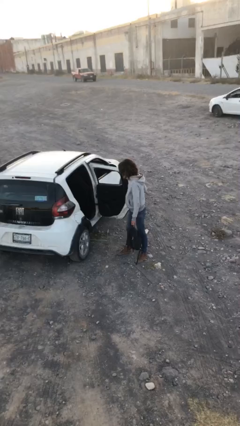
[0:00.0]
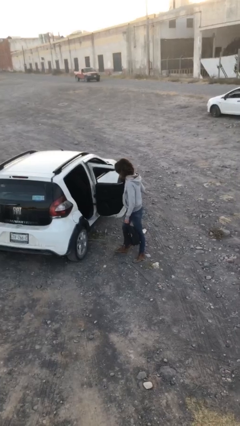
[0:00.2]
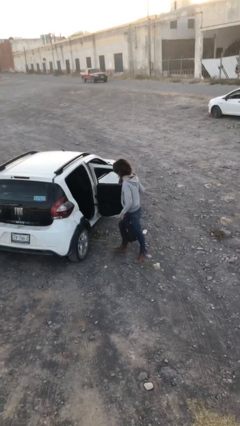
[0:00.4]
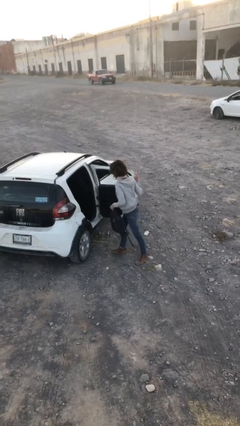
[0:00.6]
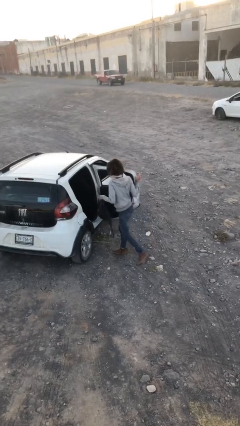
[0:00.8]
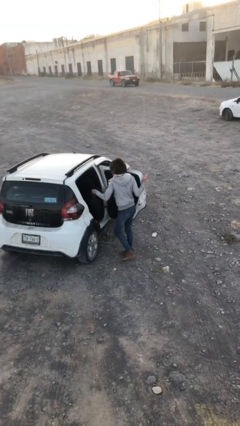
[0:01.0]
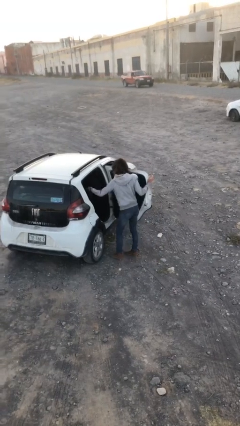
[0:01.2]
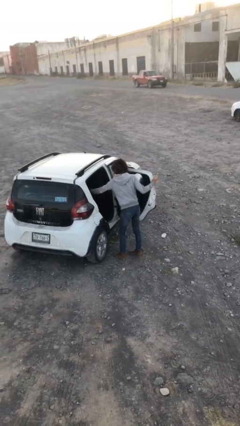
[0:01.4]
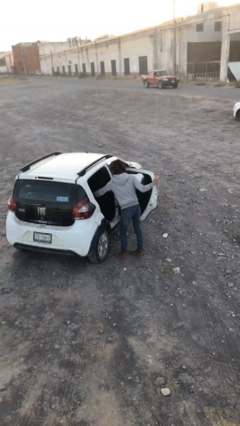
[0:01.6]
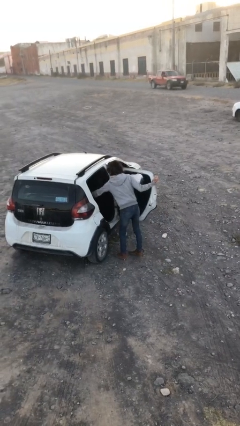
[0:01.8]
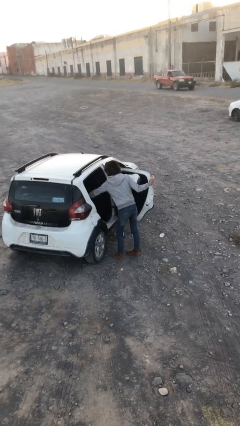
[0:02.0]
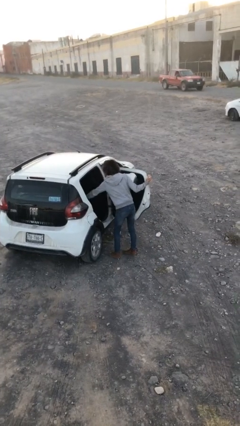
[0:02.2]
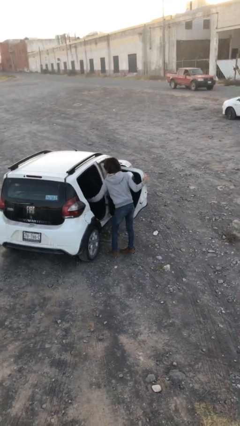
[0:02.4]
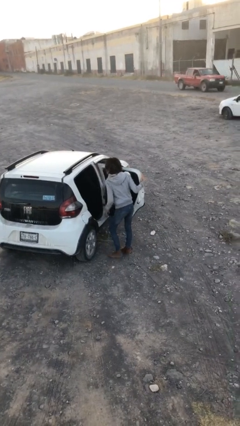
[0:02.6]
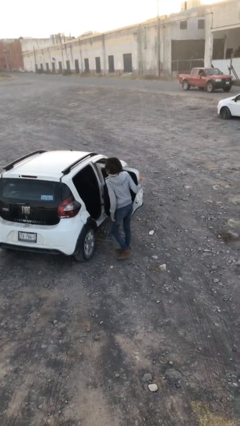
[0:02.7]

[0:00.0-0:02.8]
person loads car

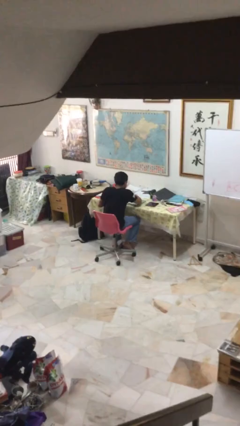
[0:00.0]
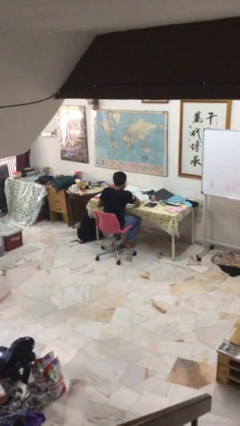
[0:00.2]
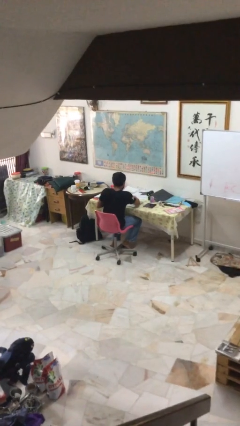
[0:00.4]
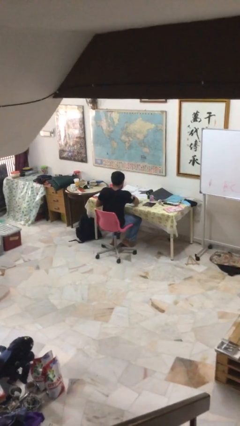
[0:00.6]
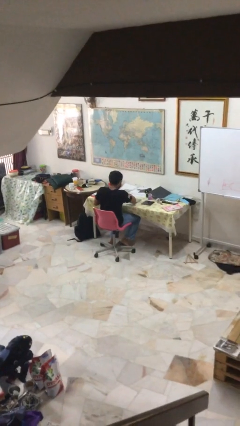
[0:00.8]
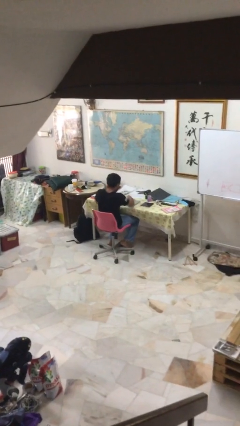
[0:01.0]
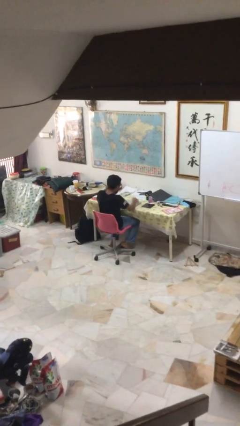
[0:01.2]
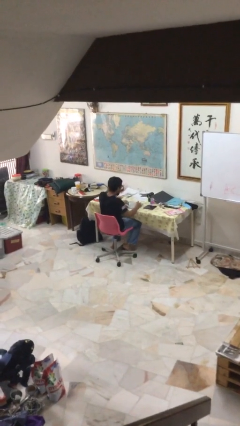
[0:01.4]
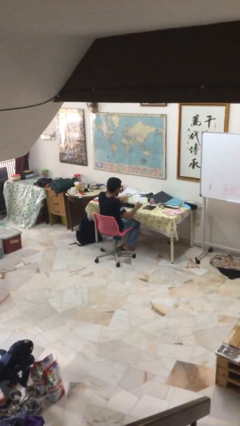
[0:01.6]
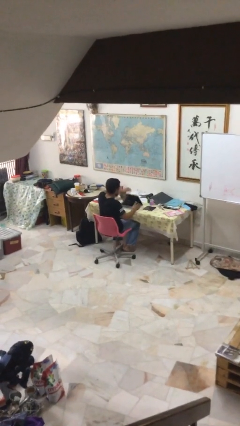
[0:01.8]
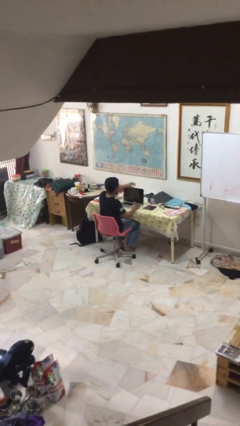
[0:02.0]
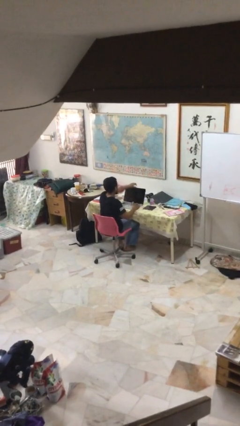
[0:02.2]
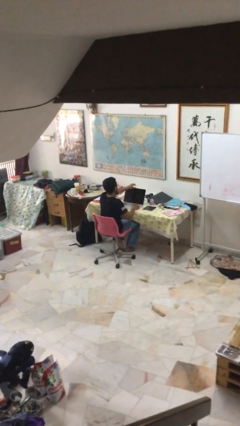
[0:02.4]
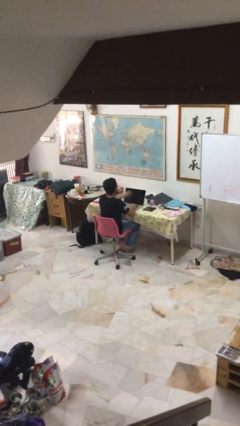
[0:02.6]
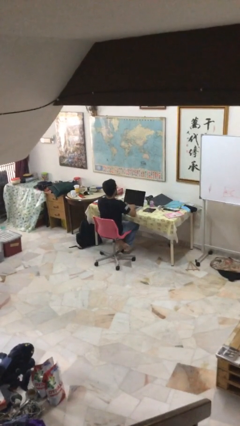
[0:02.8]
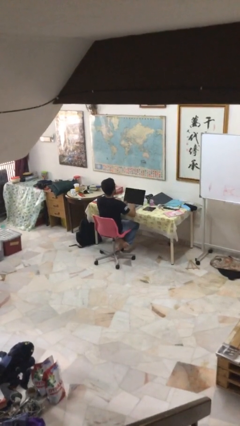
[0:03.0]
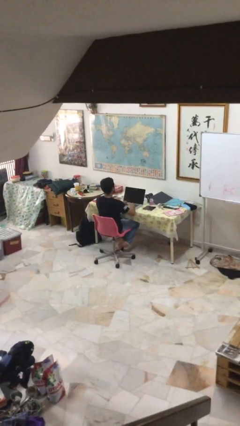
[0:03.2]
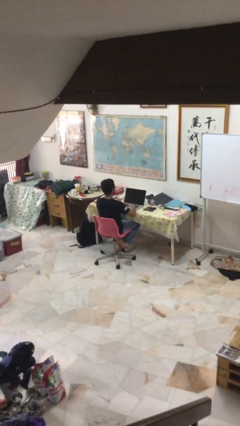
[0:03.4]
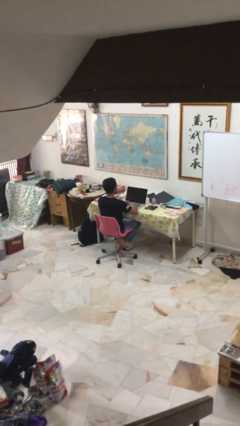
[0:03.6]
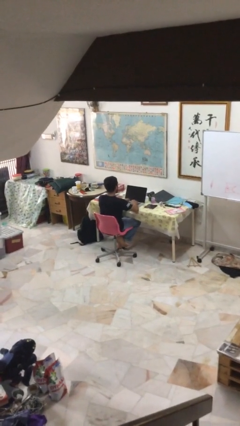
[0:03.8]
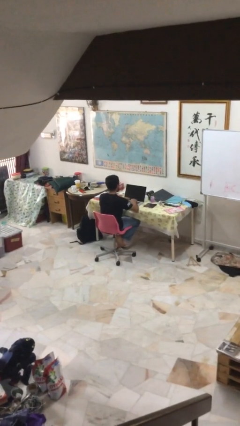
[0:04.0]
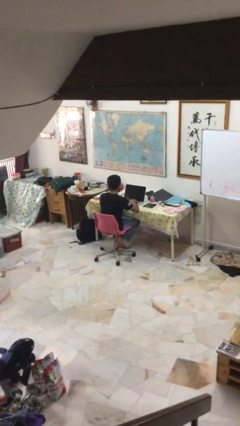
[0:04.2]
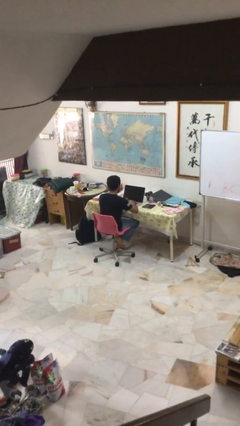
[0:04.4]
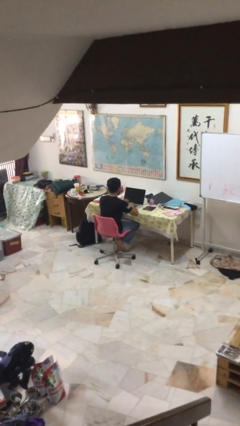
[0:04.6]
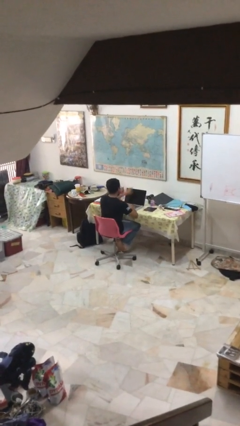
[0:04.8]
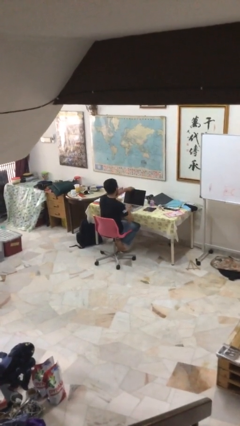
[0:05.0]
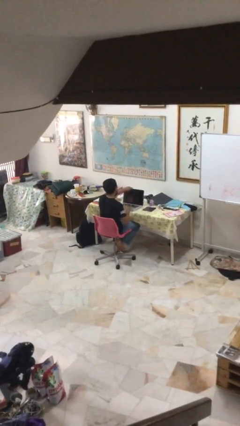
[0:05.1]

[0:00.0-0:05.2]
person interacts with laptop

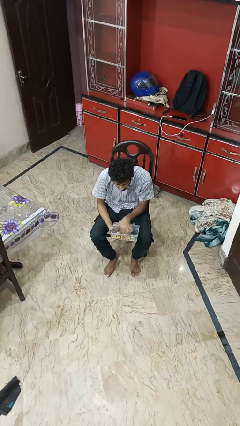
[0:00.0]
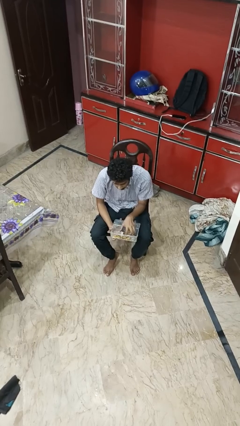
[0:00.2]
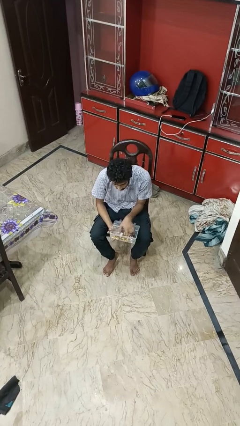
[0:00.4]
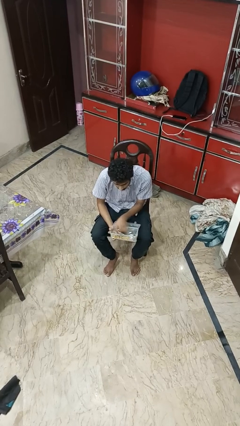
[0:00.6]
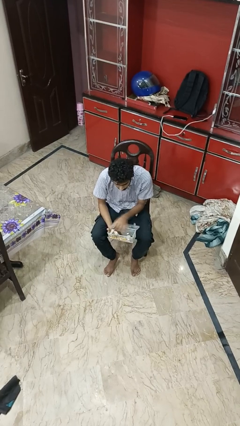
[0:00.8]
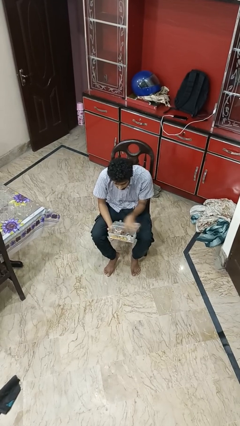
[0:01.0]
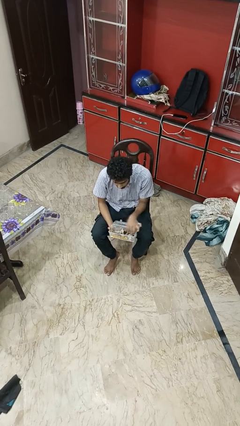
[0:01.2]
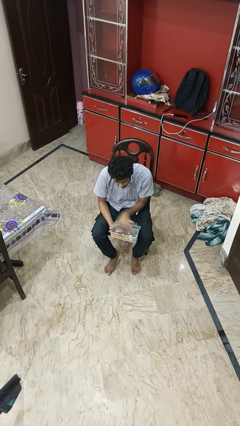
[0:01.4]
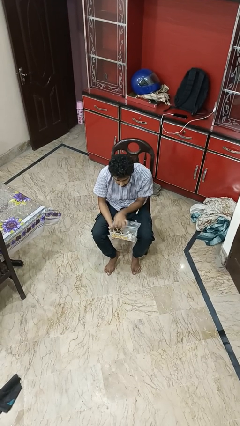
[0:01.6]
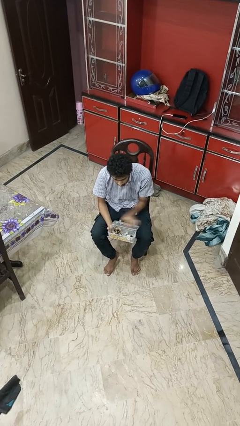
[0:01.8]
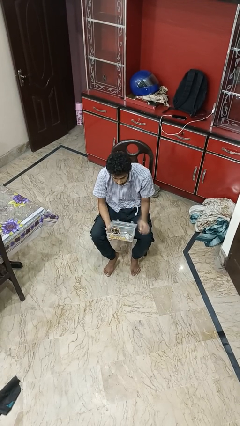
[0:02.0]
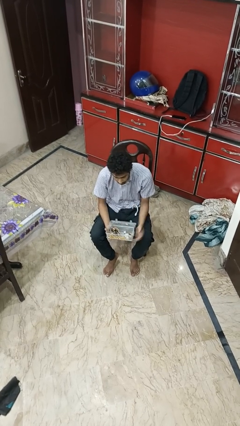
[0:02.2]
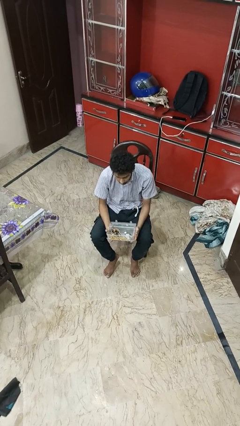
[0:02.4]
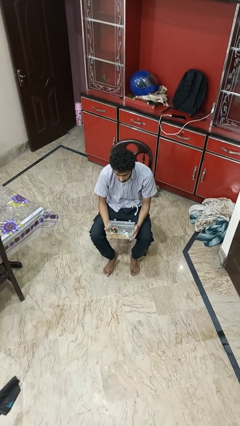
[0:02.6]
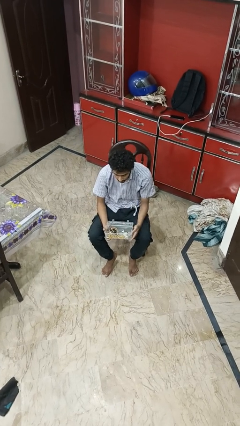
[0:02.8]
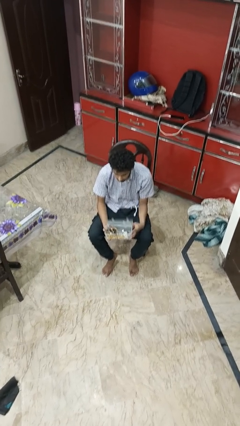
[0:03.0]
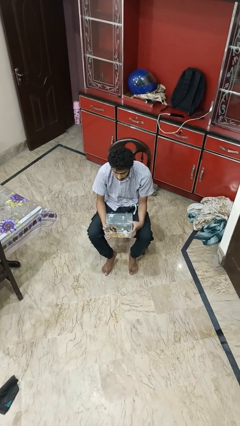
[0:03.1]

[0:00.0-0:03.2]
person searches jewelry box

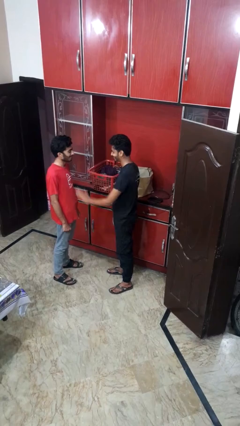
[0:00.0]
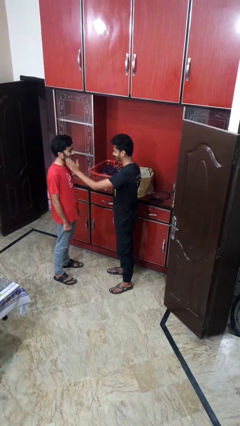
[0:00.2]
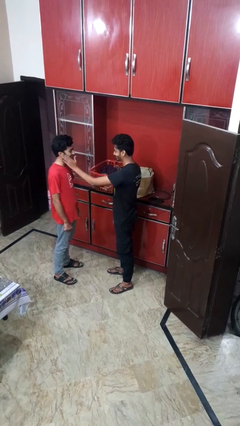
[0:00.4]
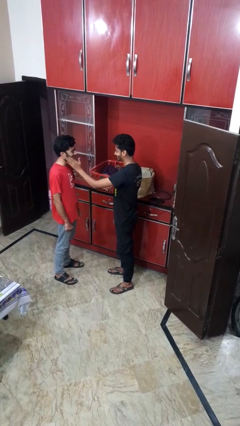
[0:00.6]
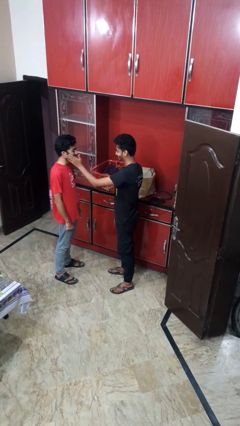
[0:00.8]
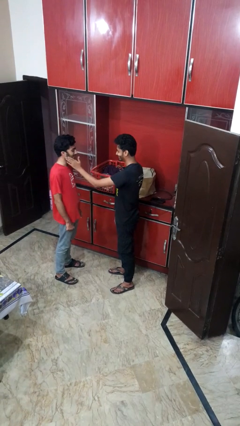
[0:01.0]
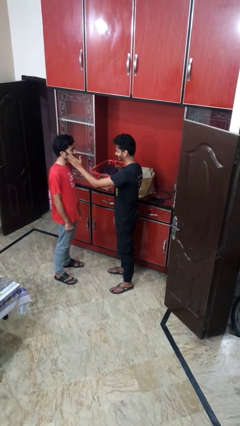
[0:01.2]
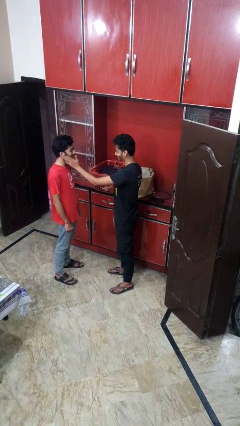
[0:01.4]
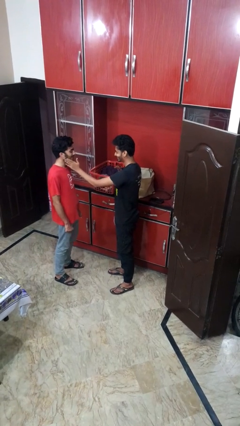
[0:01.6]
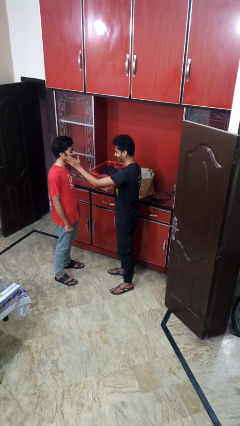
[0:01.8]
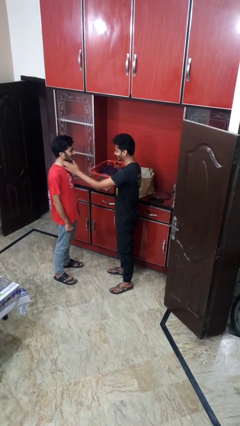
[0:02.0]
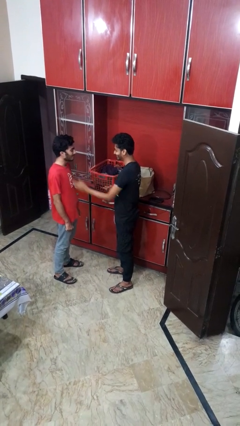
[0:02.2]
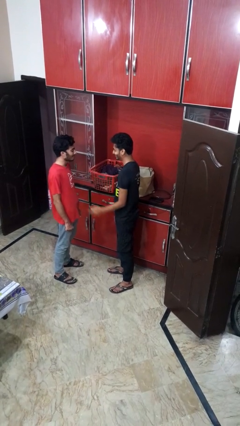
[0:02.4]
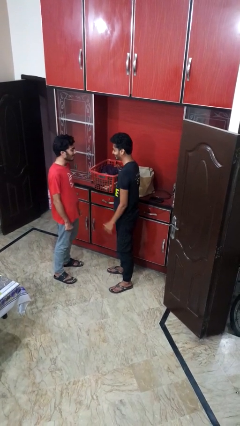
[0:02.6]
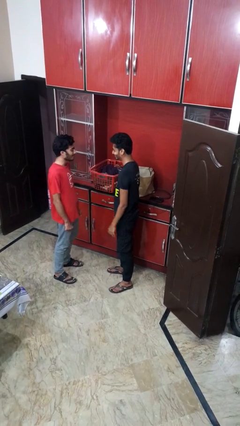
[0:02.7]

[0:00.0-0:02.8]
person touches face of person

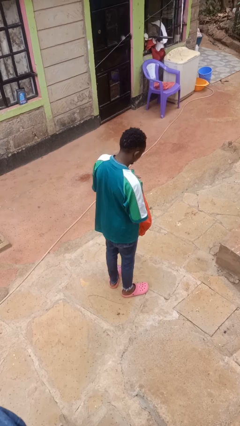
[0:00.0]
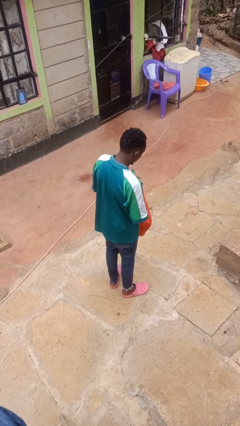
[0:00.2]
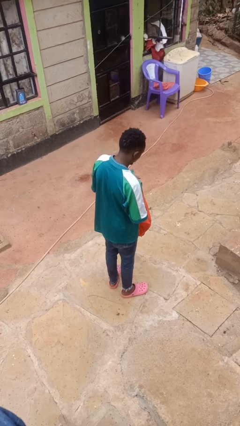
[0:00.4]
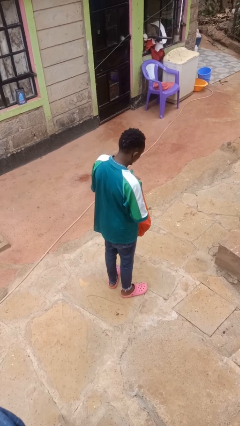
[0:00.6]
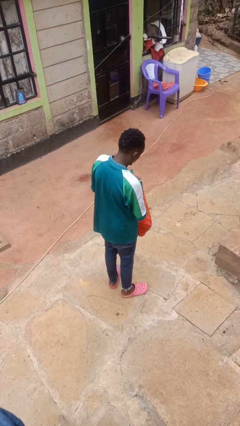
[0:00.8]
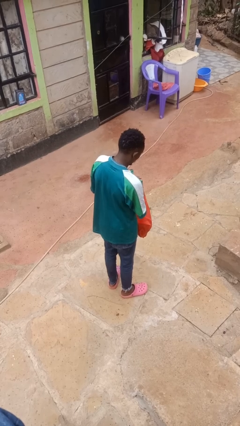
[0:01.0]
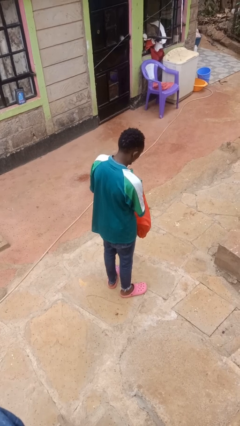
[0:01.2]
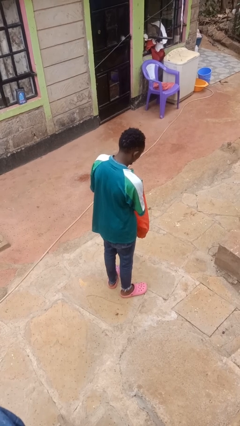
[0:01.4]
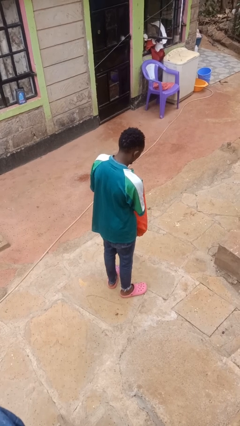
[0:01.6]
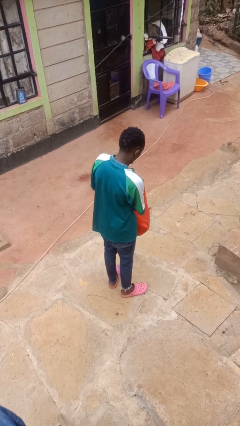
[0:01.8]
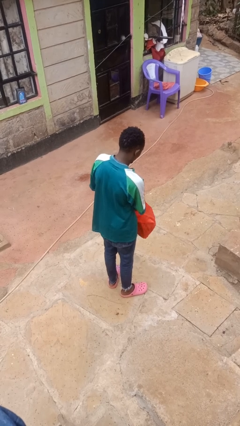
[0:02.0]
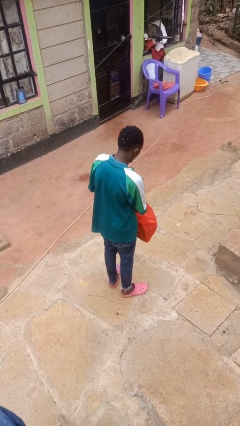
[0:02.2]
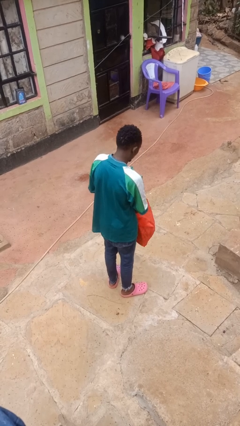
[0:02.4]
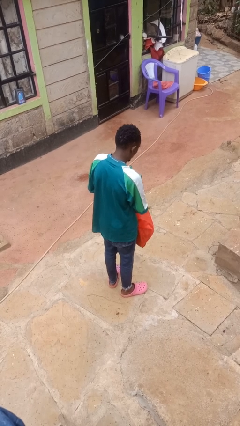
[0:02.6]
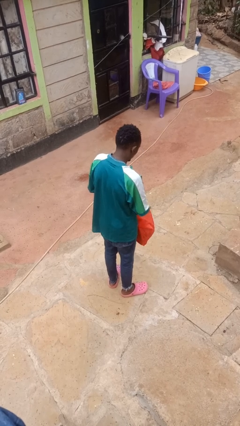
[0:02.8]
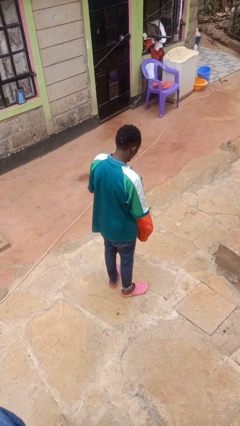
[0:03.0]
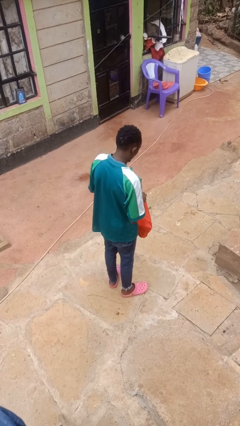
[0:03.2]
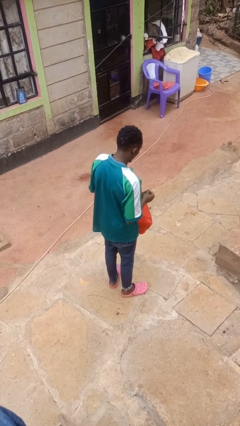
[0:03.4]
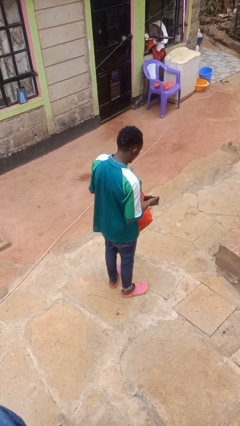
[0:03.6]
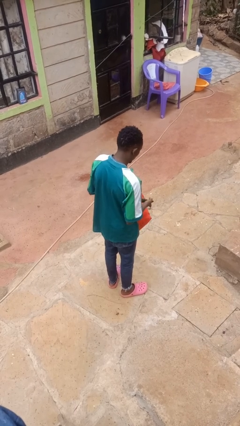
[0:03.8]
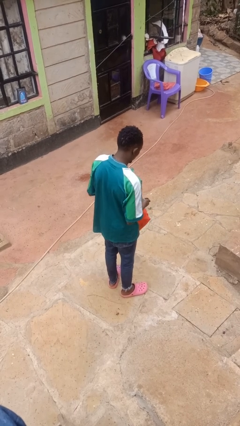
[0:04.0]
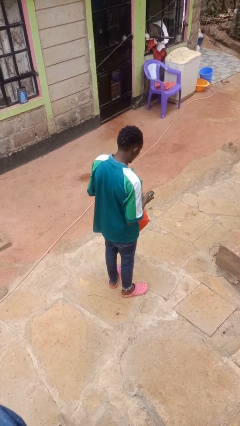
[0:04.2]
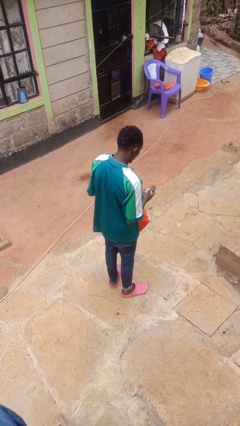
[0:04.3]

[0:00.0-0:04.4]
person takes object from bag
